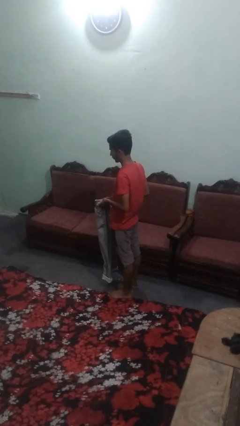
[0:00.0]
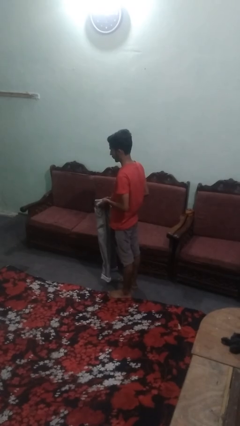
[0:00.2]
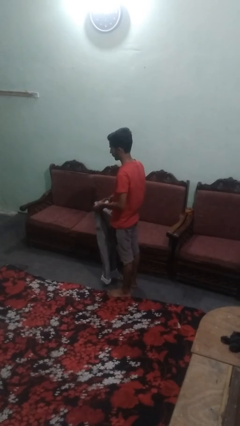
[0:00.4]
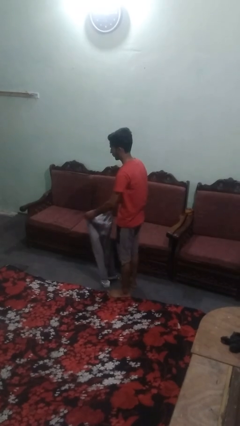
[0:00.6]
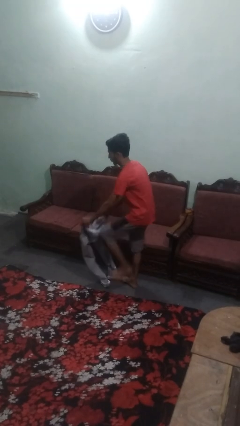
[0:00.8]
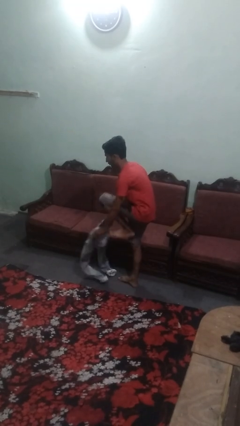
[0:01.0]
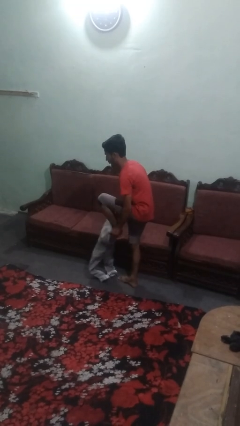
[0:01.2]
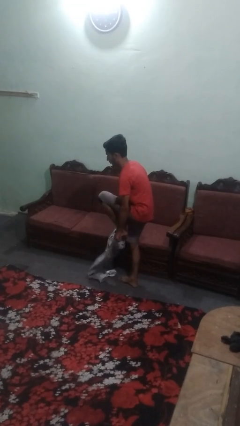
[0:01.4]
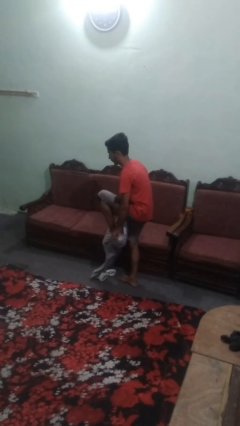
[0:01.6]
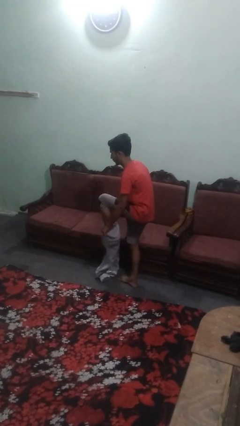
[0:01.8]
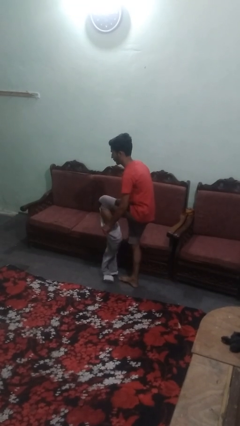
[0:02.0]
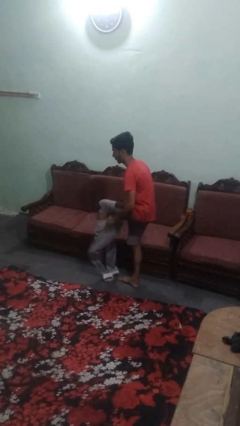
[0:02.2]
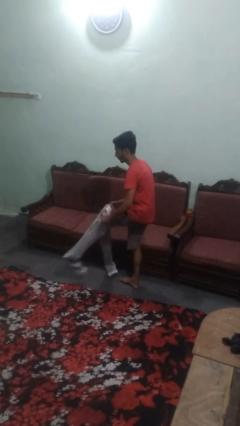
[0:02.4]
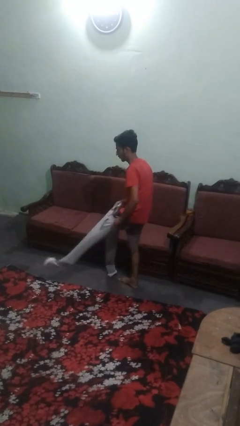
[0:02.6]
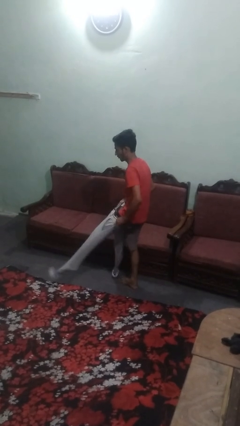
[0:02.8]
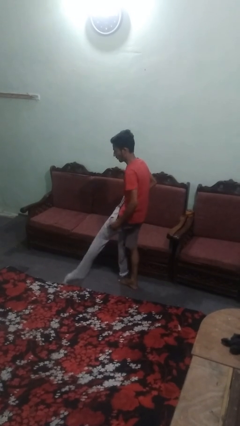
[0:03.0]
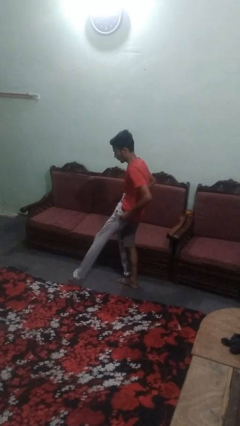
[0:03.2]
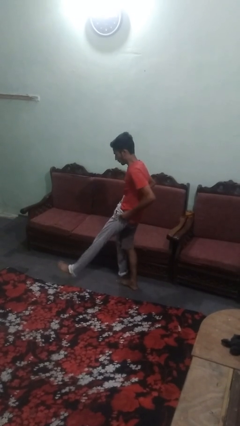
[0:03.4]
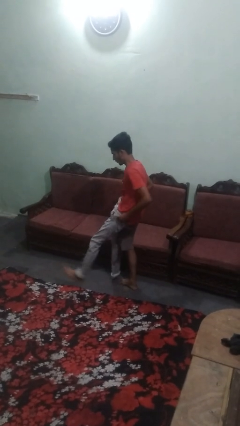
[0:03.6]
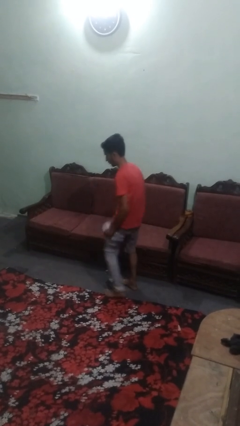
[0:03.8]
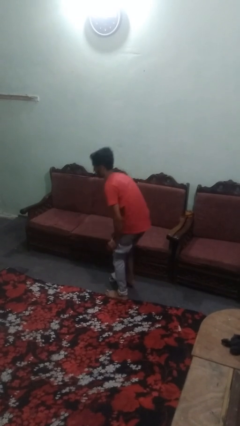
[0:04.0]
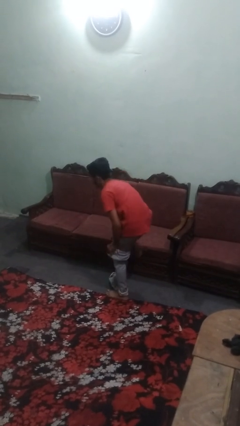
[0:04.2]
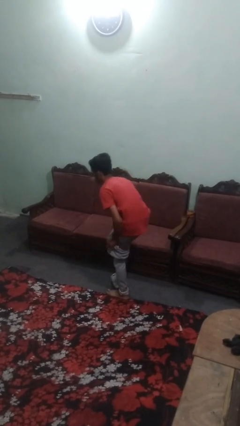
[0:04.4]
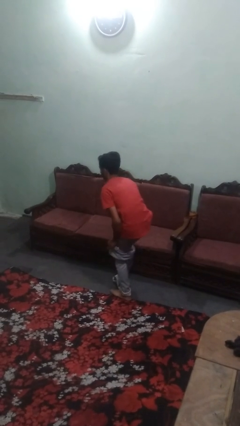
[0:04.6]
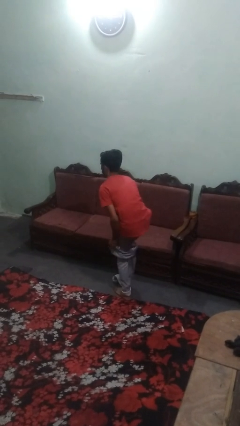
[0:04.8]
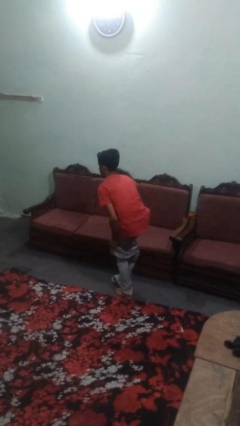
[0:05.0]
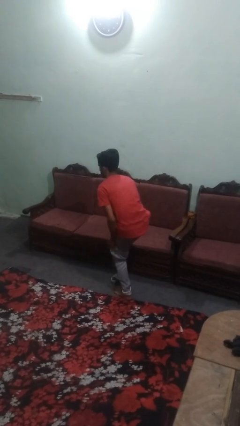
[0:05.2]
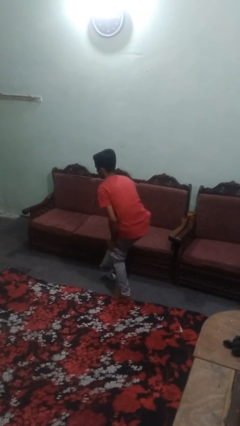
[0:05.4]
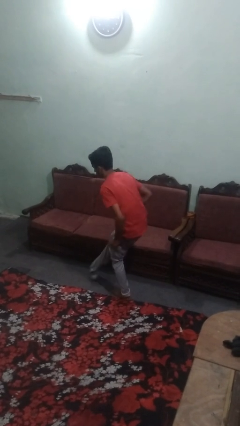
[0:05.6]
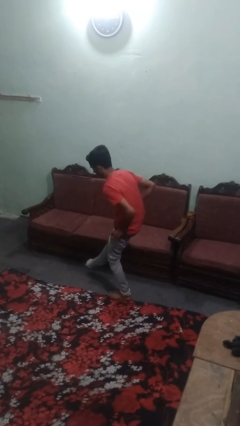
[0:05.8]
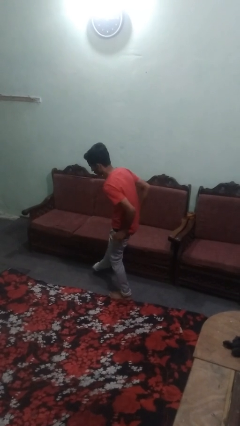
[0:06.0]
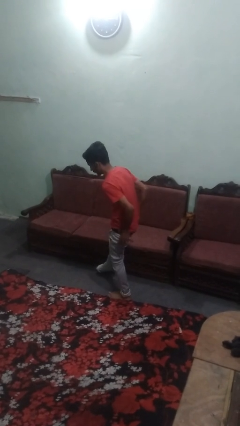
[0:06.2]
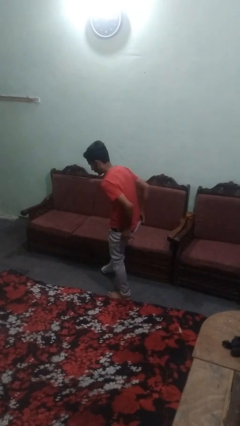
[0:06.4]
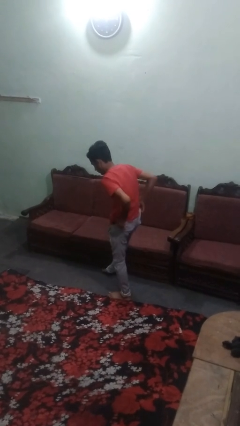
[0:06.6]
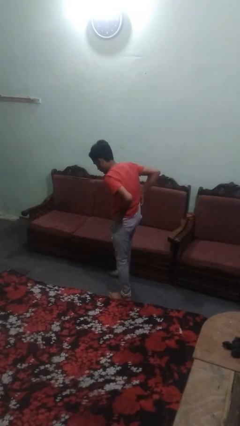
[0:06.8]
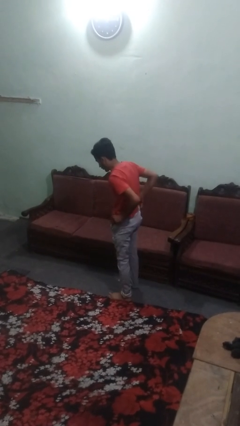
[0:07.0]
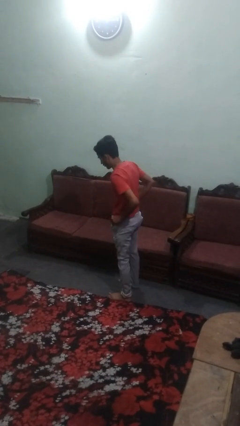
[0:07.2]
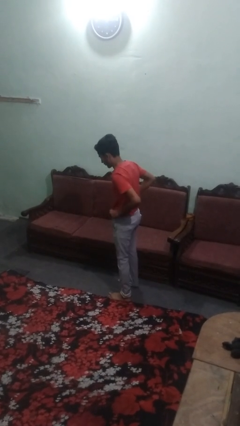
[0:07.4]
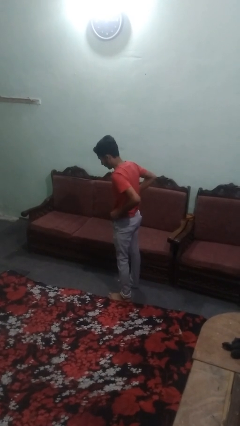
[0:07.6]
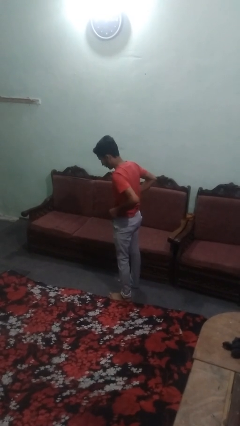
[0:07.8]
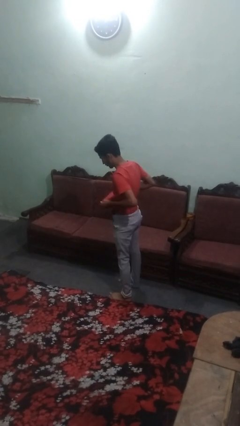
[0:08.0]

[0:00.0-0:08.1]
person takes off pants

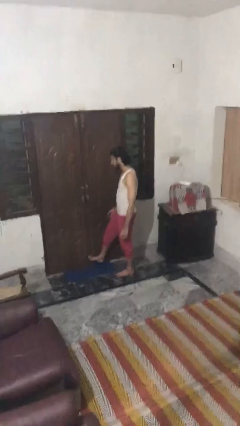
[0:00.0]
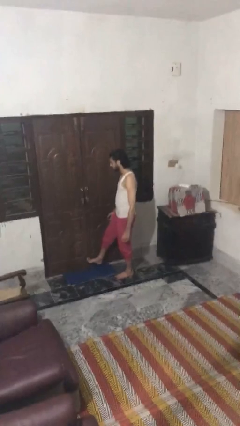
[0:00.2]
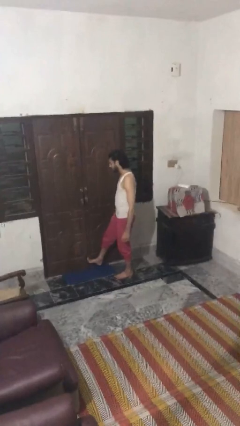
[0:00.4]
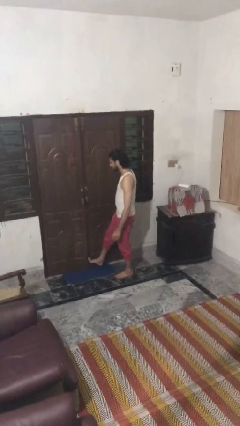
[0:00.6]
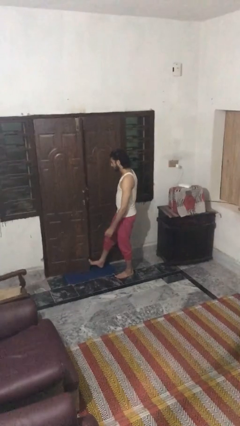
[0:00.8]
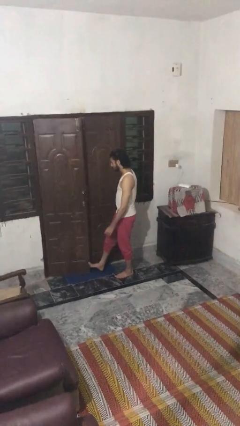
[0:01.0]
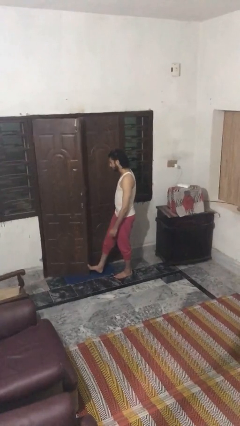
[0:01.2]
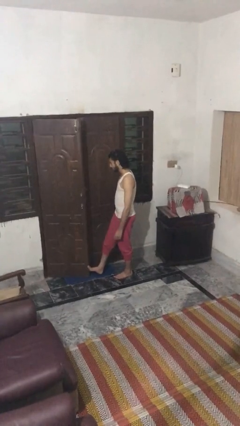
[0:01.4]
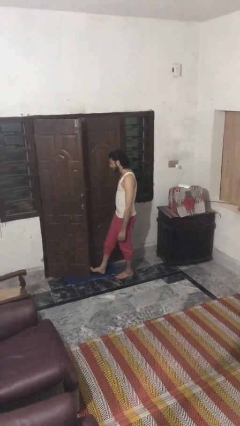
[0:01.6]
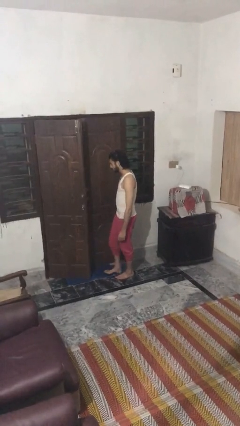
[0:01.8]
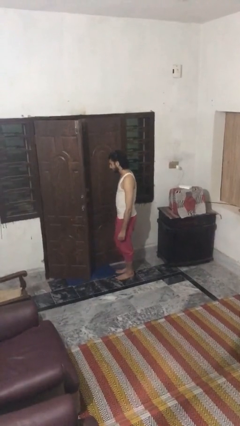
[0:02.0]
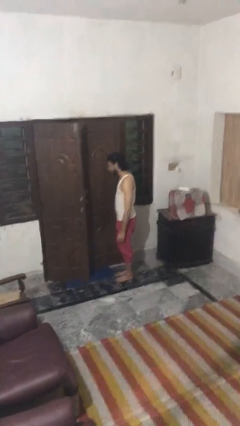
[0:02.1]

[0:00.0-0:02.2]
person opens facility door

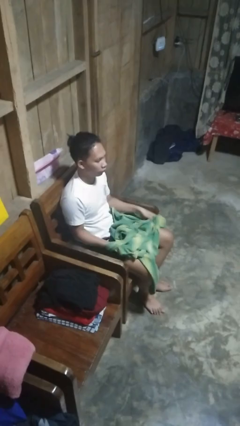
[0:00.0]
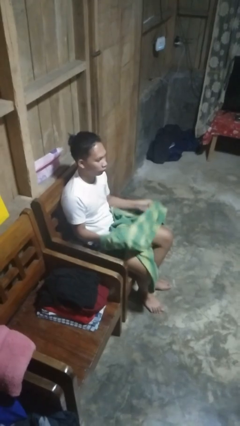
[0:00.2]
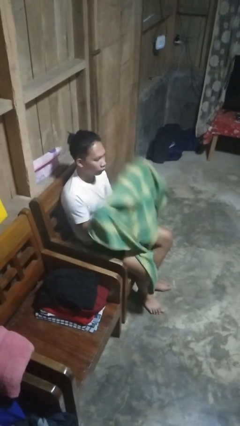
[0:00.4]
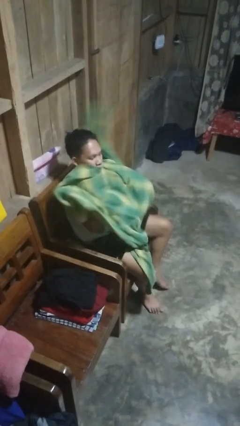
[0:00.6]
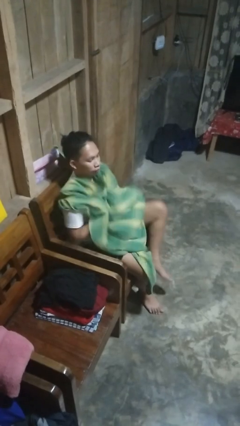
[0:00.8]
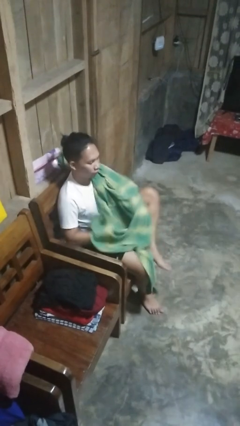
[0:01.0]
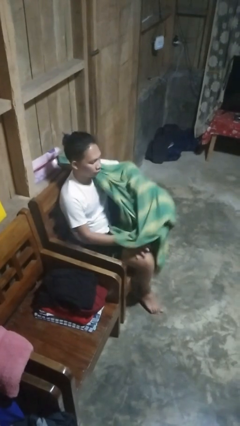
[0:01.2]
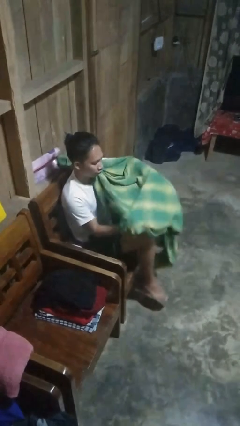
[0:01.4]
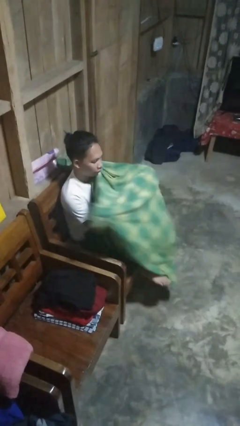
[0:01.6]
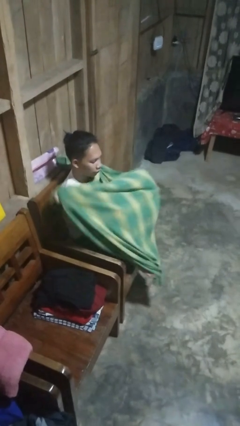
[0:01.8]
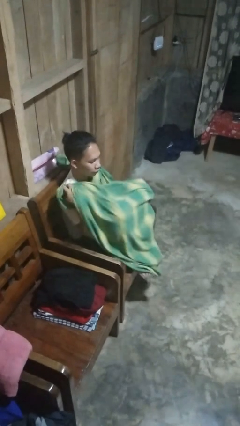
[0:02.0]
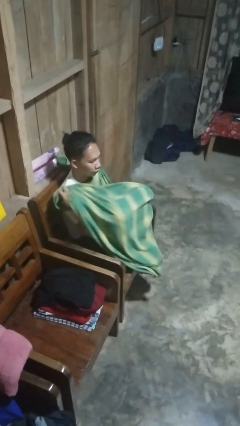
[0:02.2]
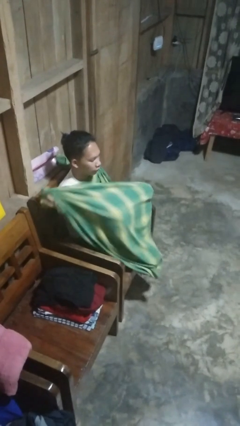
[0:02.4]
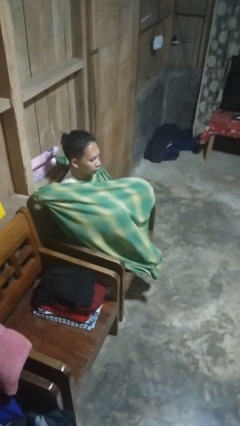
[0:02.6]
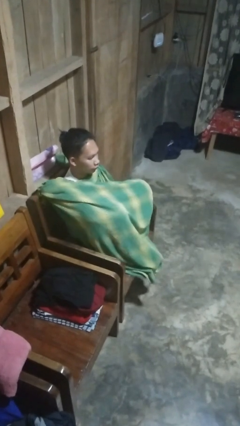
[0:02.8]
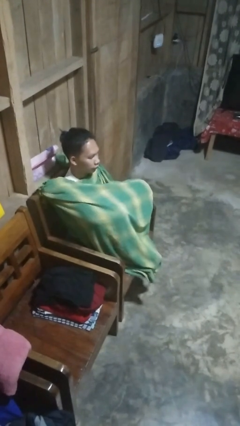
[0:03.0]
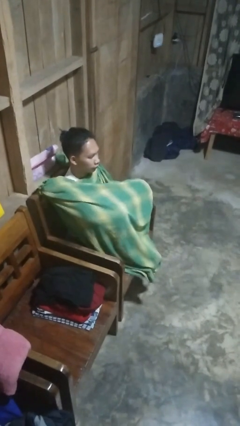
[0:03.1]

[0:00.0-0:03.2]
person covers with blanket

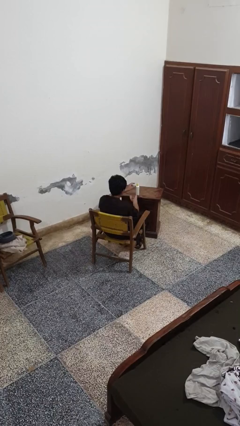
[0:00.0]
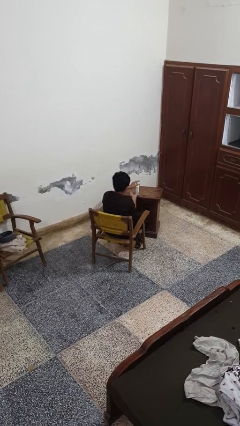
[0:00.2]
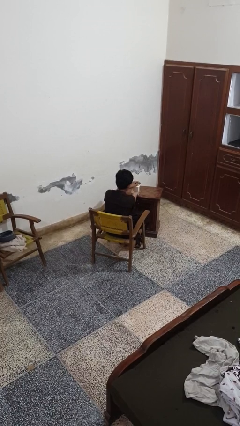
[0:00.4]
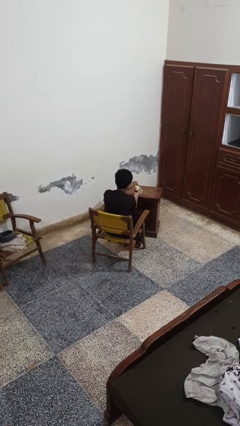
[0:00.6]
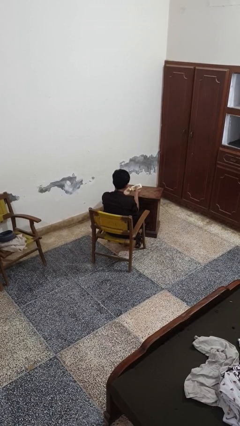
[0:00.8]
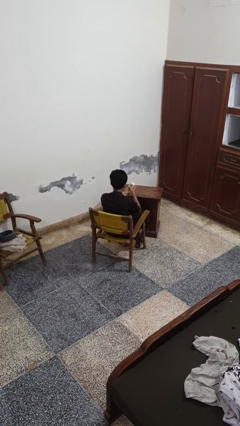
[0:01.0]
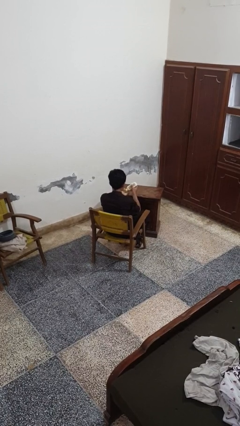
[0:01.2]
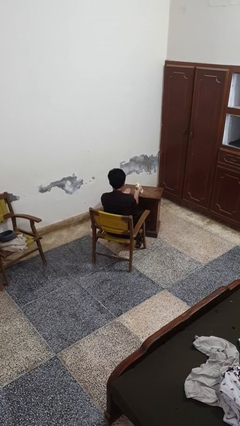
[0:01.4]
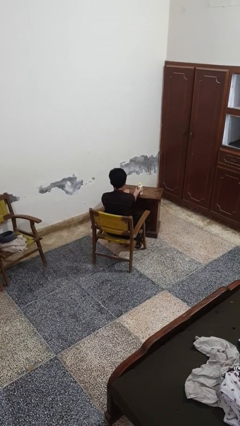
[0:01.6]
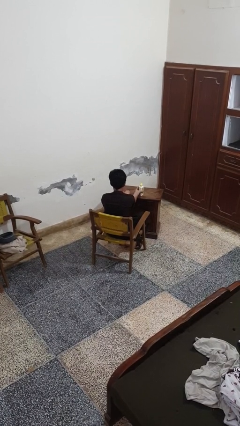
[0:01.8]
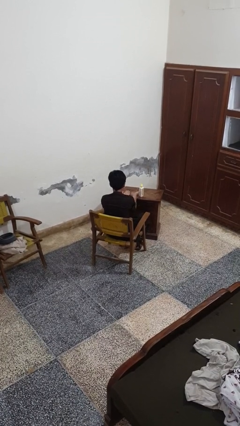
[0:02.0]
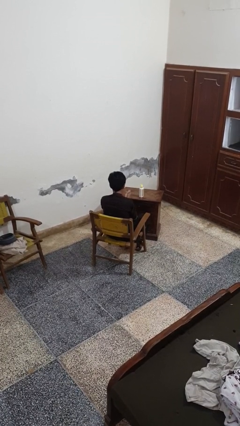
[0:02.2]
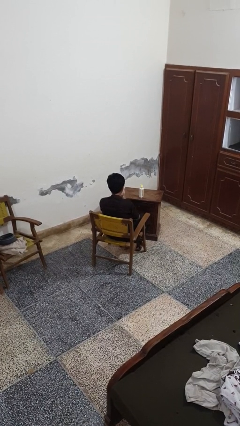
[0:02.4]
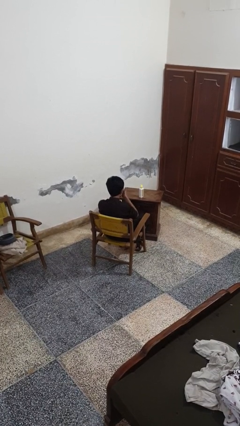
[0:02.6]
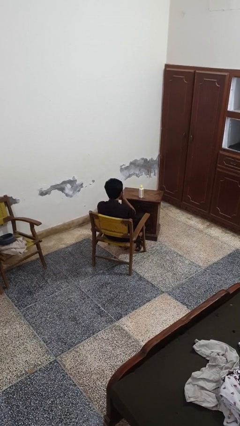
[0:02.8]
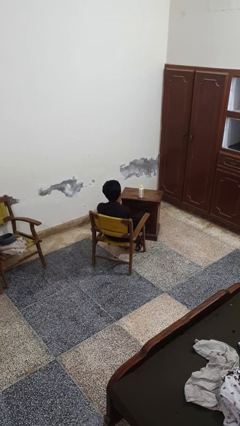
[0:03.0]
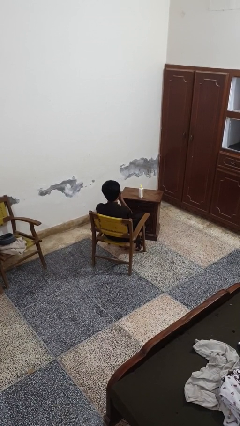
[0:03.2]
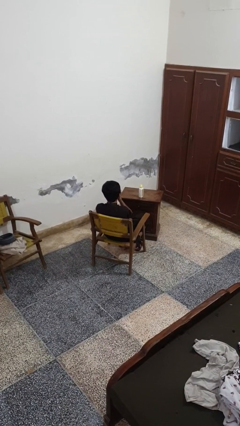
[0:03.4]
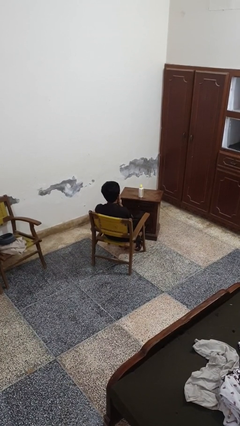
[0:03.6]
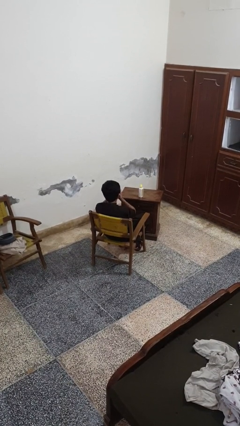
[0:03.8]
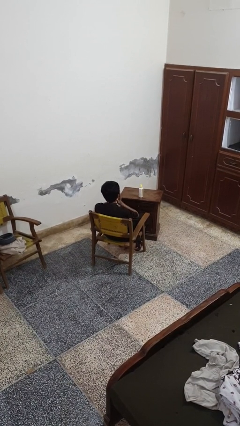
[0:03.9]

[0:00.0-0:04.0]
person applies sunscreen
